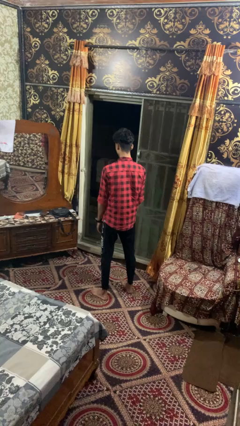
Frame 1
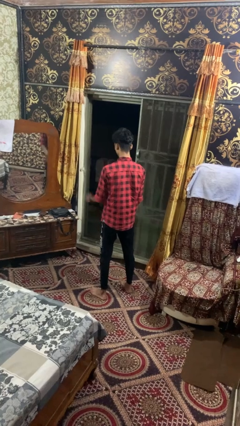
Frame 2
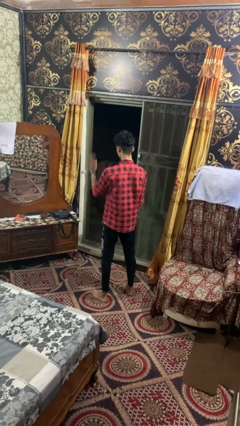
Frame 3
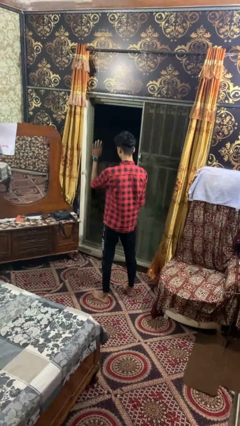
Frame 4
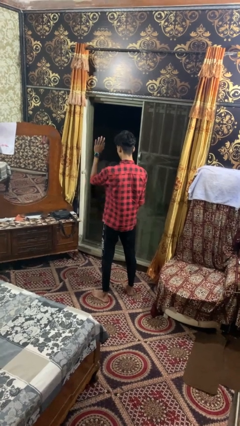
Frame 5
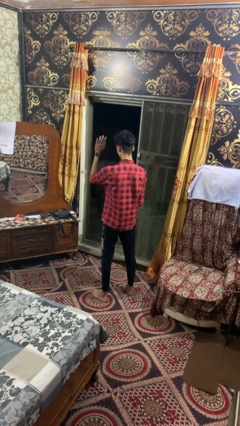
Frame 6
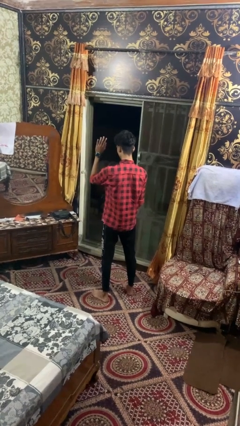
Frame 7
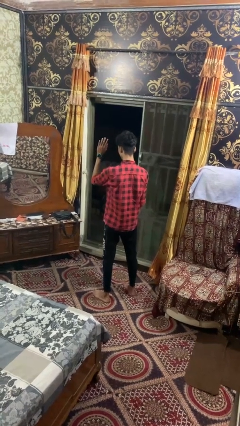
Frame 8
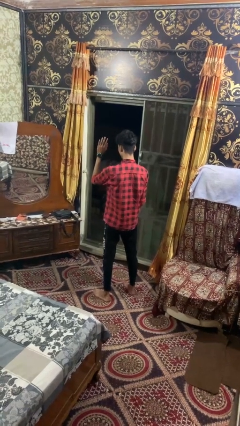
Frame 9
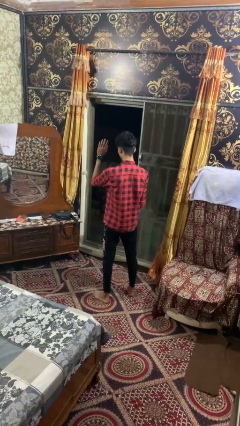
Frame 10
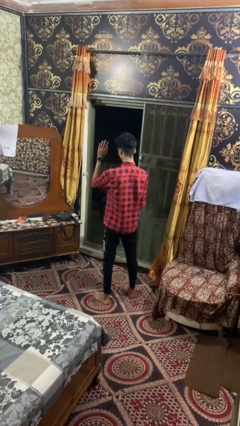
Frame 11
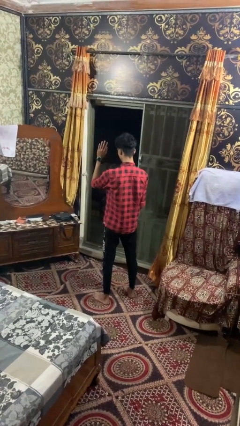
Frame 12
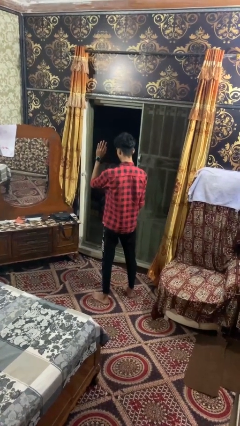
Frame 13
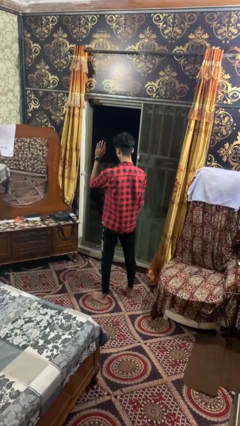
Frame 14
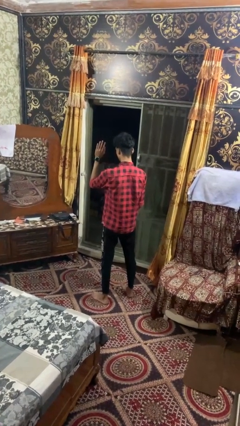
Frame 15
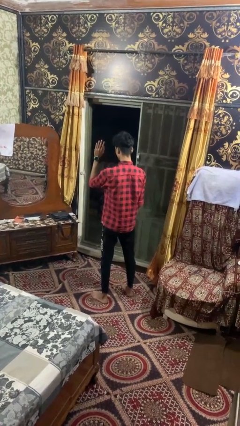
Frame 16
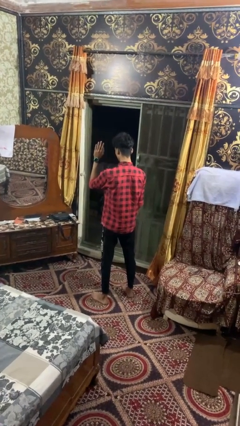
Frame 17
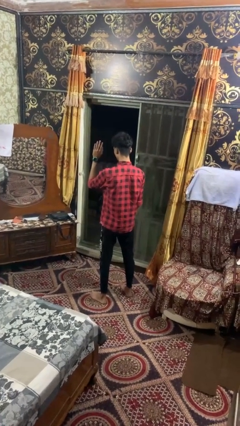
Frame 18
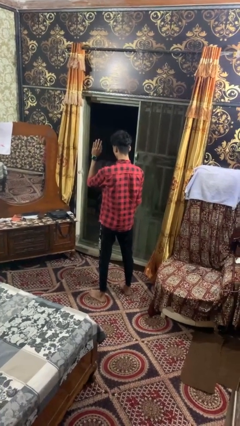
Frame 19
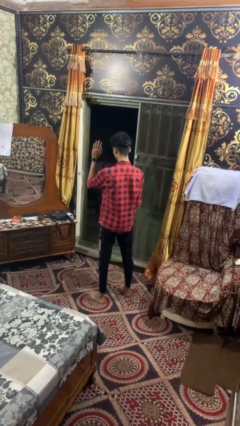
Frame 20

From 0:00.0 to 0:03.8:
person gestures swipe left

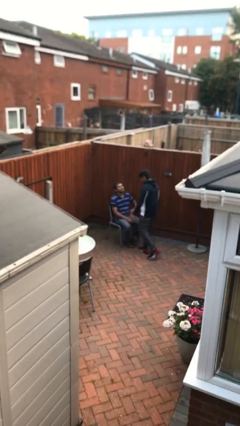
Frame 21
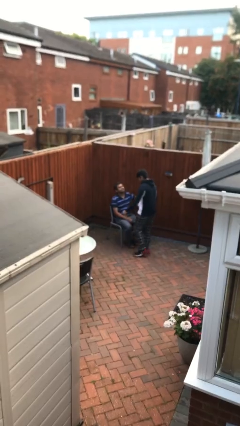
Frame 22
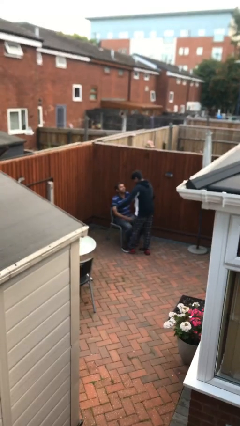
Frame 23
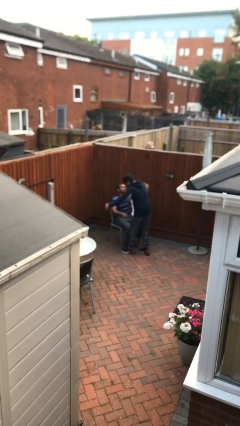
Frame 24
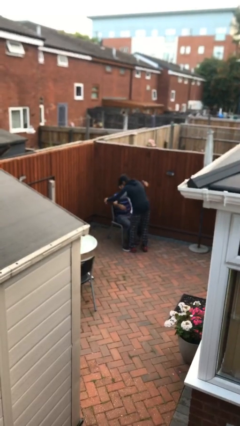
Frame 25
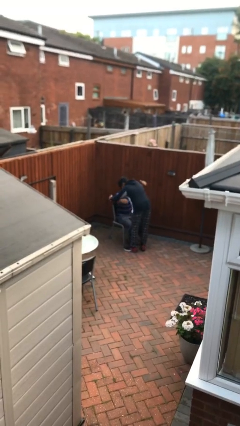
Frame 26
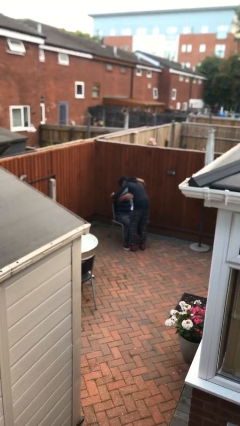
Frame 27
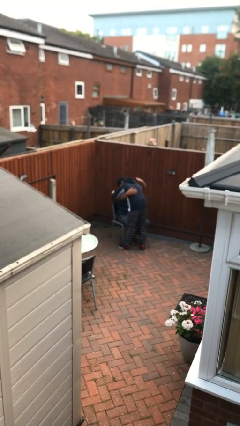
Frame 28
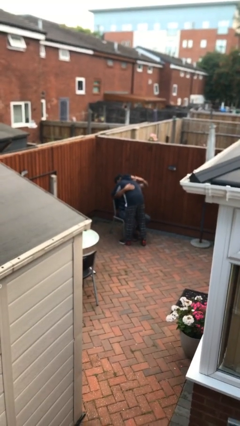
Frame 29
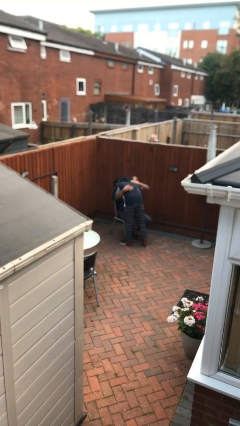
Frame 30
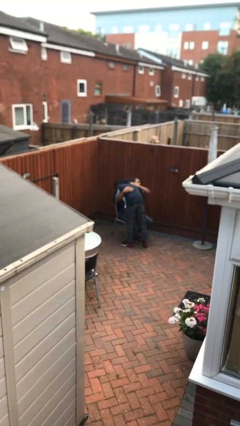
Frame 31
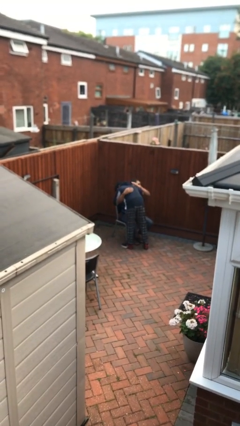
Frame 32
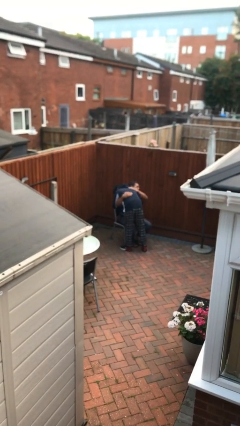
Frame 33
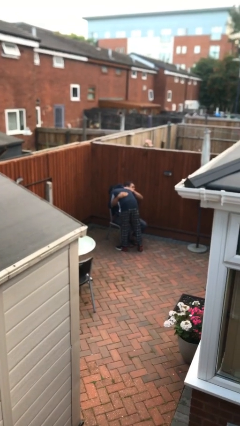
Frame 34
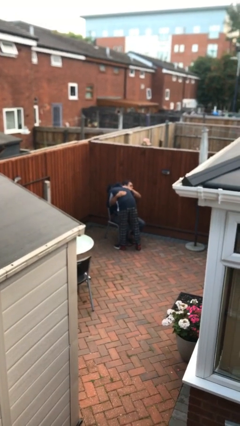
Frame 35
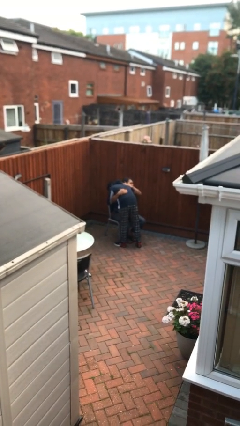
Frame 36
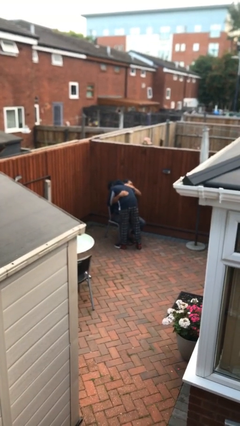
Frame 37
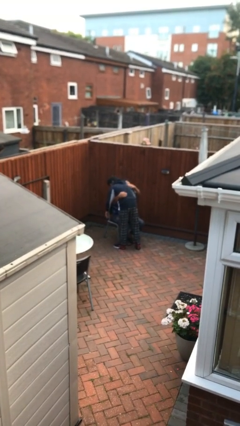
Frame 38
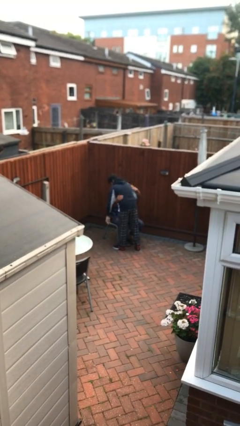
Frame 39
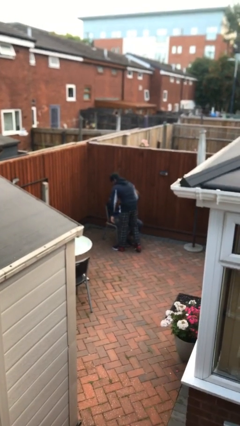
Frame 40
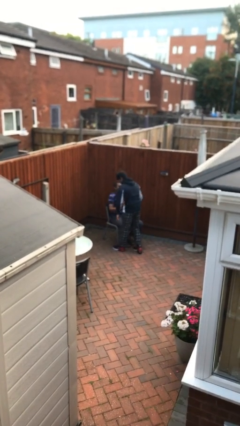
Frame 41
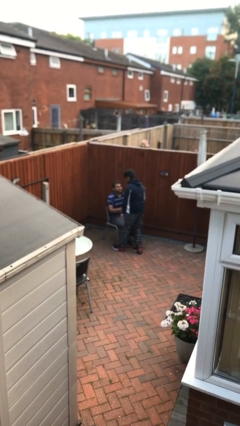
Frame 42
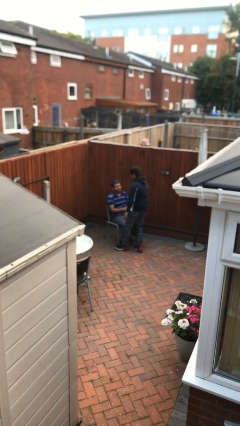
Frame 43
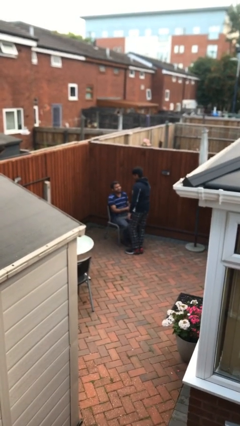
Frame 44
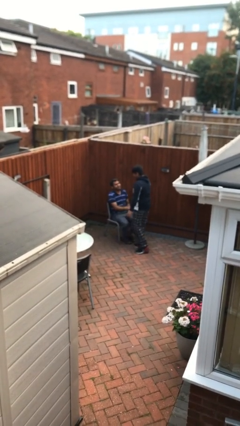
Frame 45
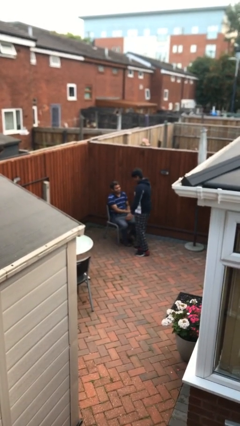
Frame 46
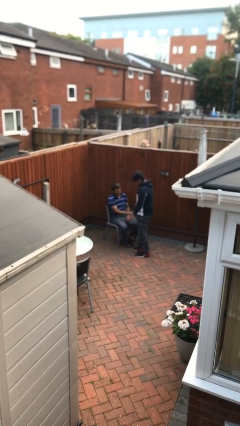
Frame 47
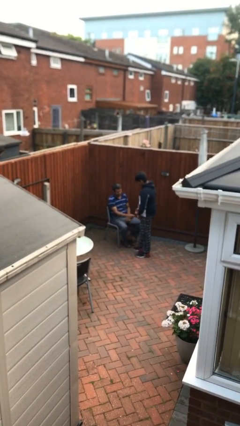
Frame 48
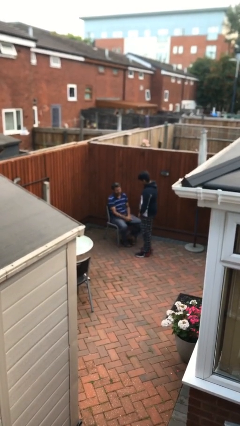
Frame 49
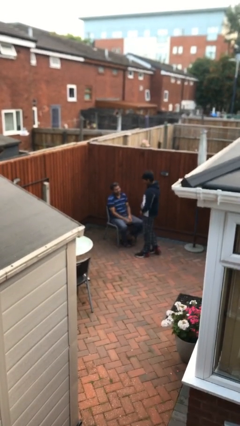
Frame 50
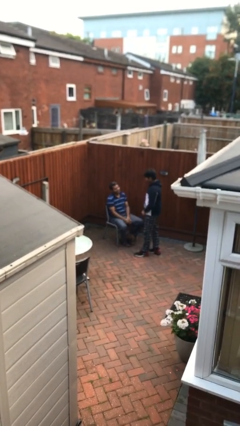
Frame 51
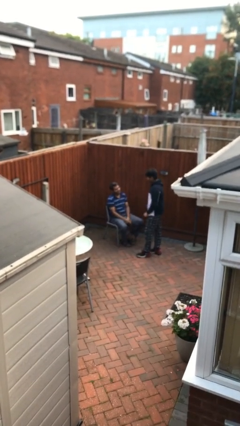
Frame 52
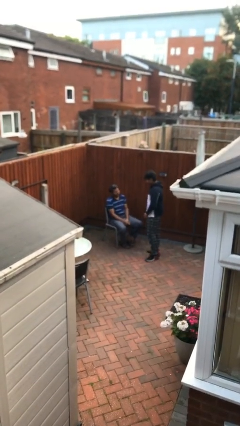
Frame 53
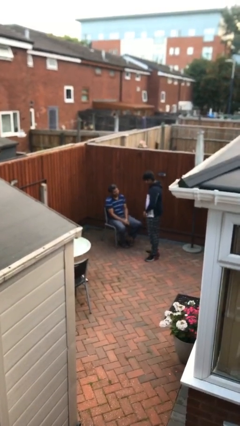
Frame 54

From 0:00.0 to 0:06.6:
person embraces person

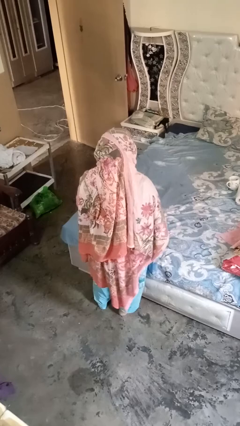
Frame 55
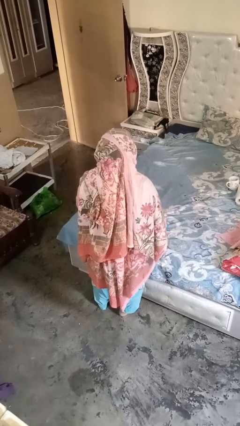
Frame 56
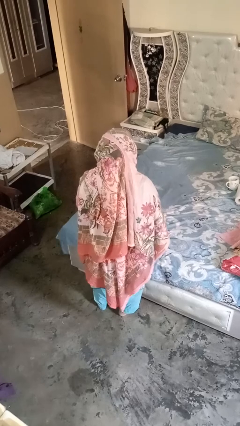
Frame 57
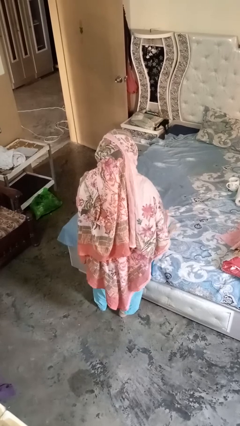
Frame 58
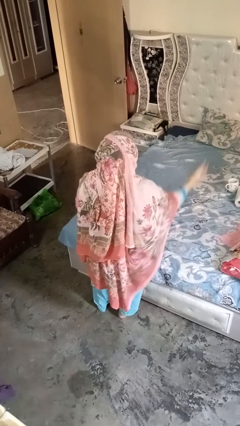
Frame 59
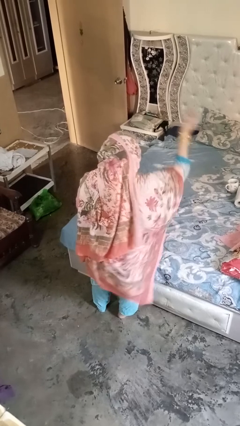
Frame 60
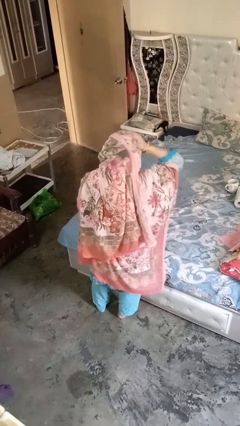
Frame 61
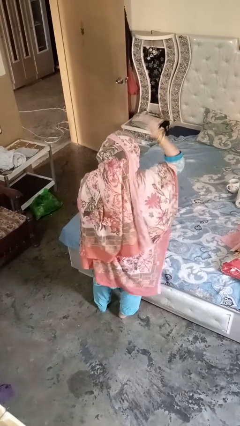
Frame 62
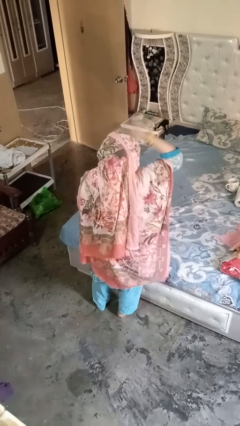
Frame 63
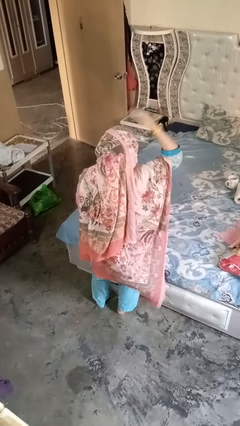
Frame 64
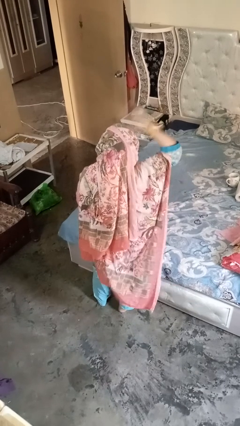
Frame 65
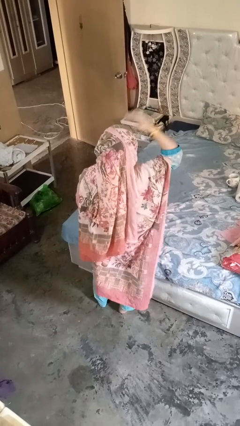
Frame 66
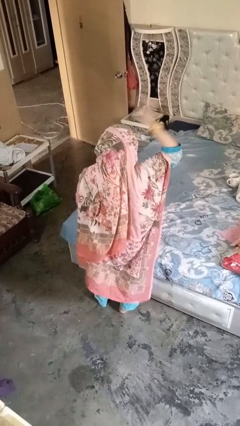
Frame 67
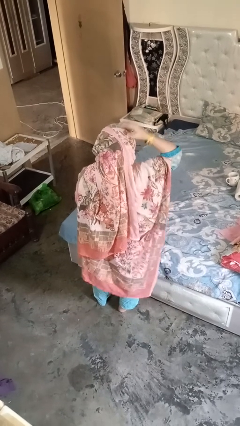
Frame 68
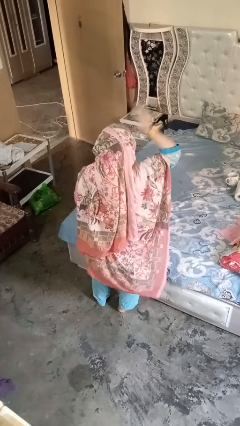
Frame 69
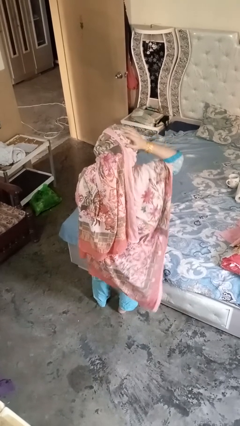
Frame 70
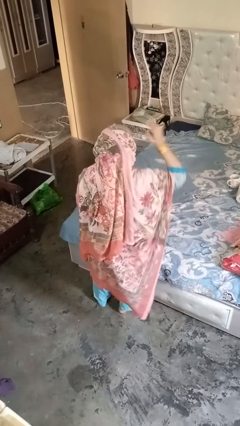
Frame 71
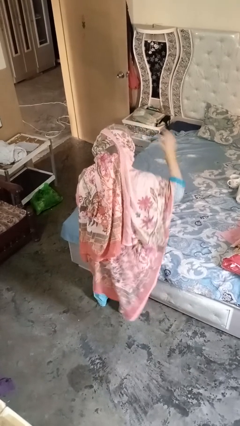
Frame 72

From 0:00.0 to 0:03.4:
person pats head

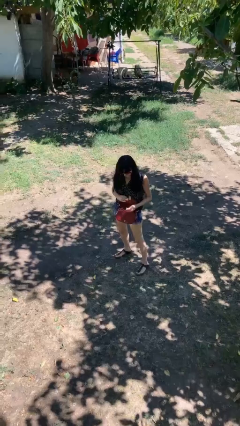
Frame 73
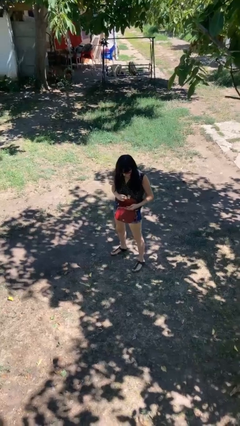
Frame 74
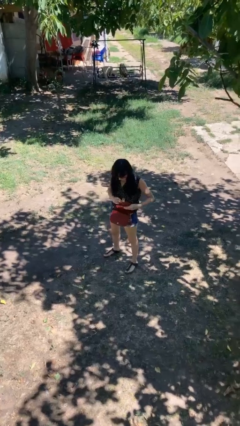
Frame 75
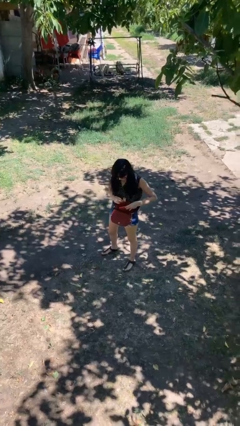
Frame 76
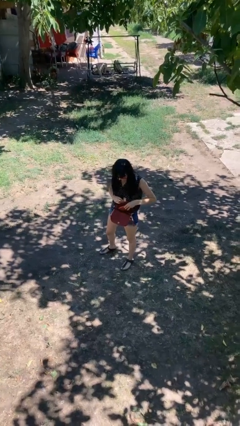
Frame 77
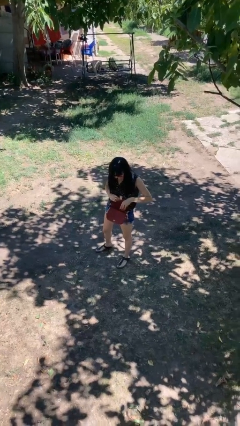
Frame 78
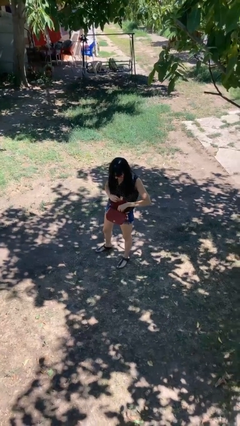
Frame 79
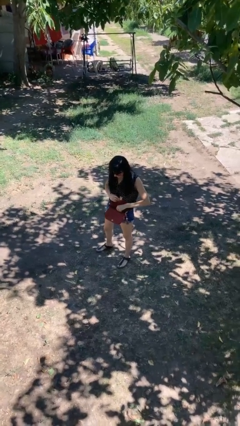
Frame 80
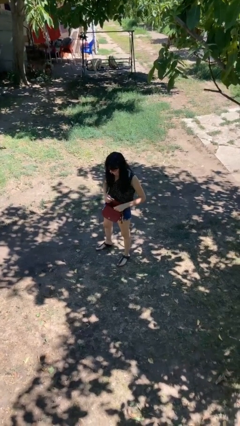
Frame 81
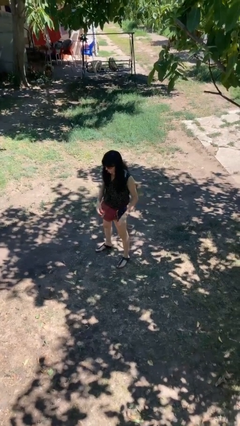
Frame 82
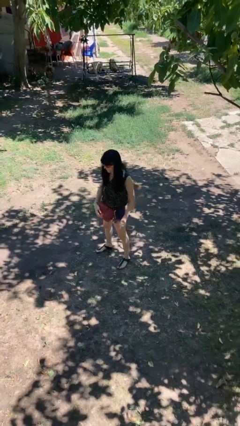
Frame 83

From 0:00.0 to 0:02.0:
person puts object into purse

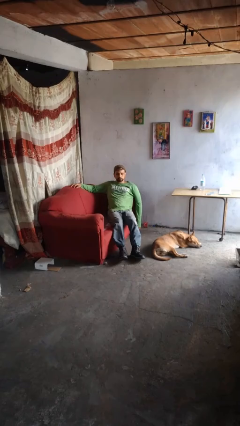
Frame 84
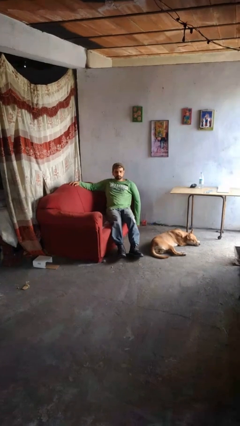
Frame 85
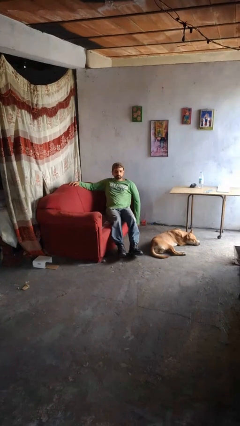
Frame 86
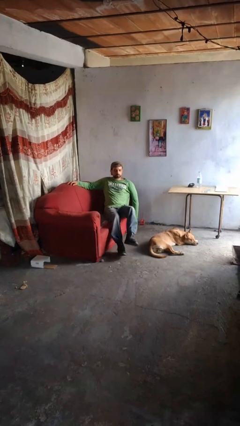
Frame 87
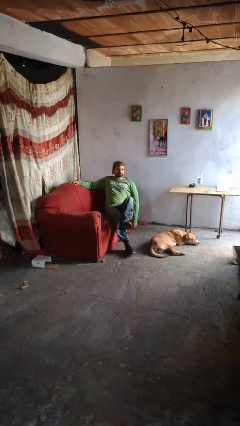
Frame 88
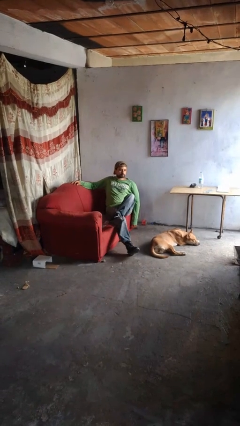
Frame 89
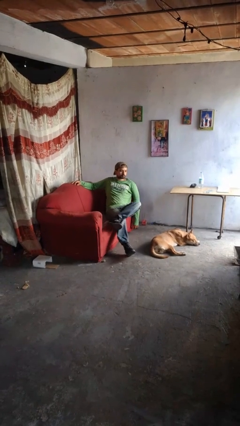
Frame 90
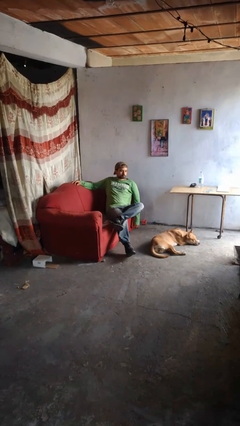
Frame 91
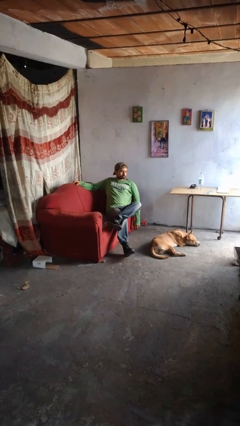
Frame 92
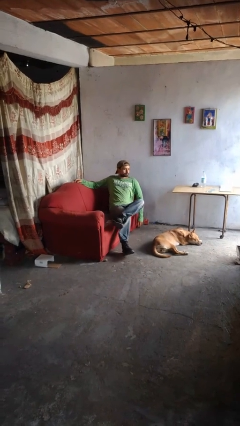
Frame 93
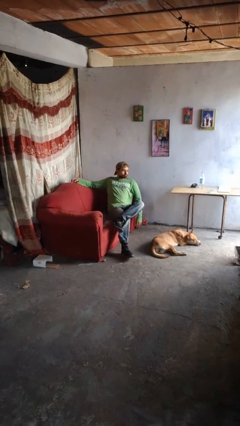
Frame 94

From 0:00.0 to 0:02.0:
person crosses legs
